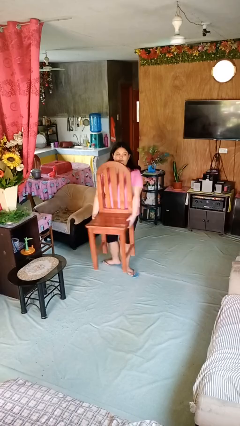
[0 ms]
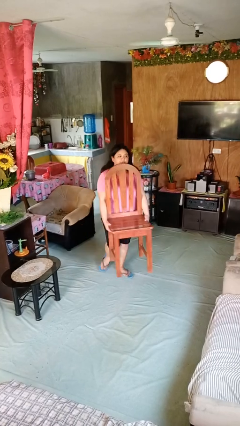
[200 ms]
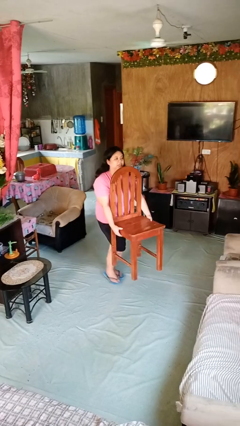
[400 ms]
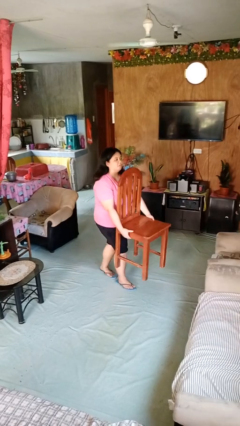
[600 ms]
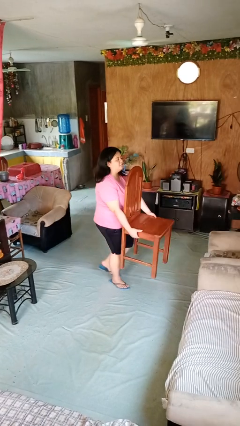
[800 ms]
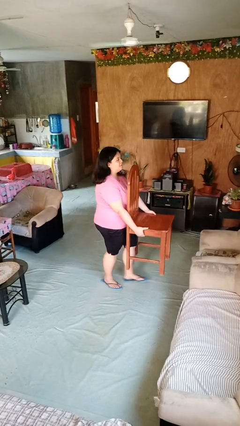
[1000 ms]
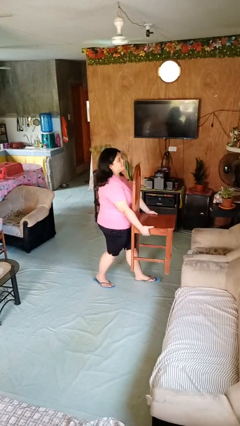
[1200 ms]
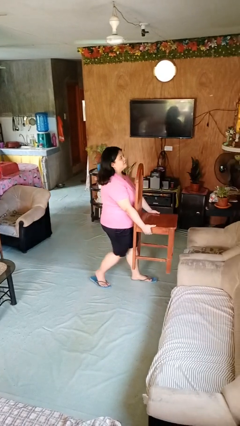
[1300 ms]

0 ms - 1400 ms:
person carries furniture

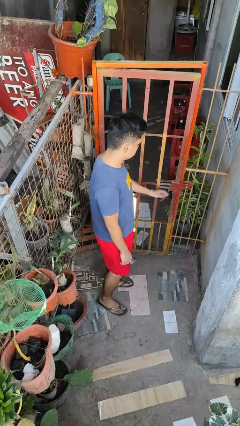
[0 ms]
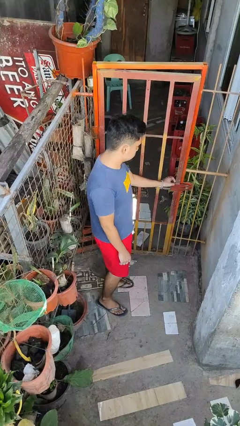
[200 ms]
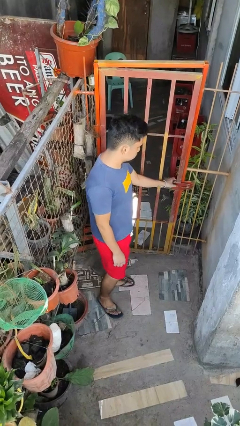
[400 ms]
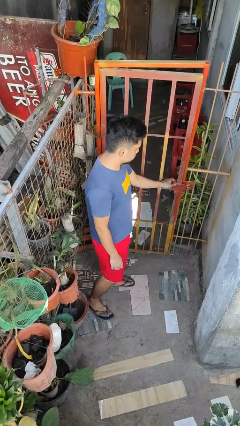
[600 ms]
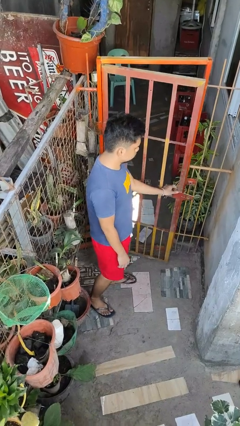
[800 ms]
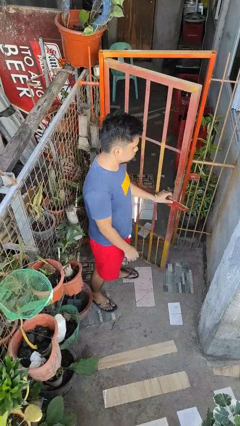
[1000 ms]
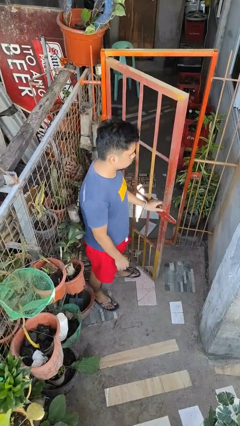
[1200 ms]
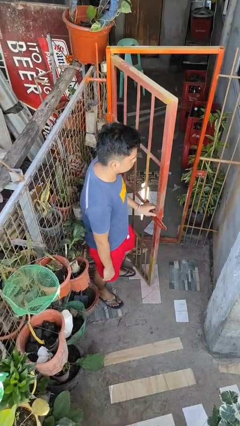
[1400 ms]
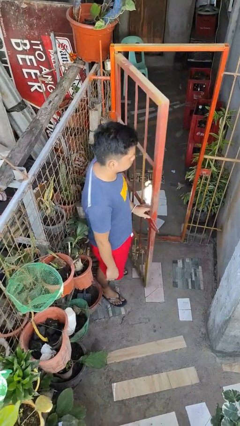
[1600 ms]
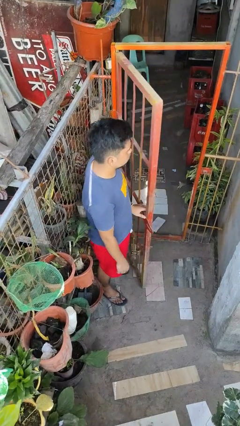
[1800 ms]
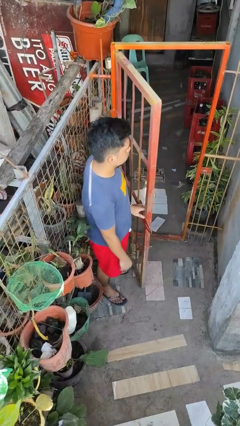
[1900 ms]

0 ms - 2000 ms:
person opens gate

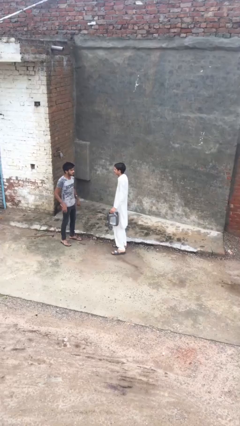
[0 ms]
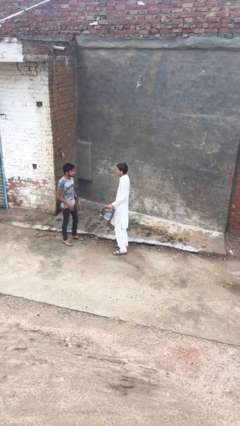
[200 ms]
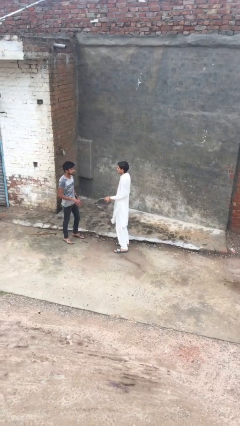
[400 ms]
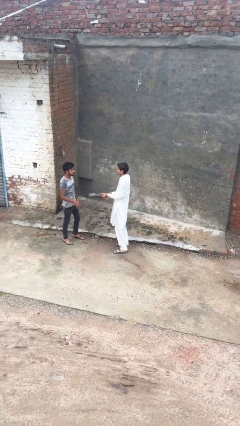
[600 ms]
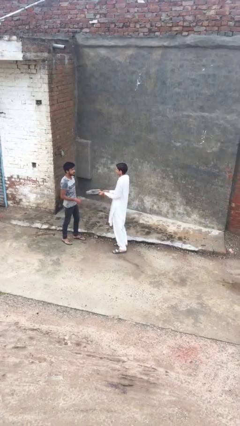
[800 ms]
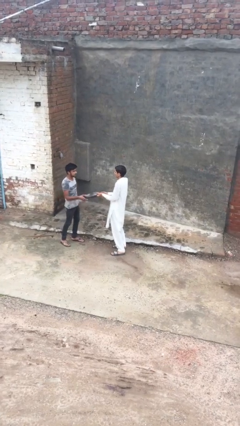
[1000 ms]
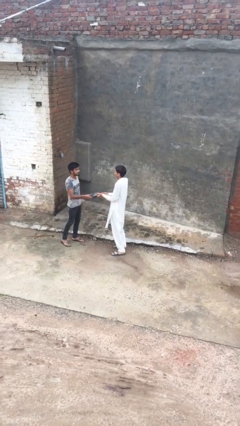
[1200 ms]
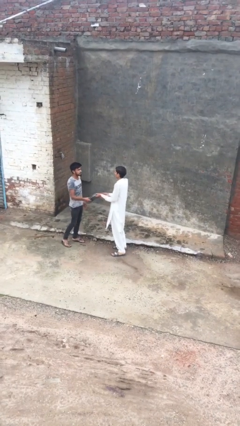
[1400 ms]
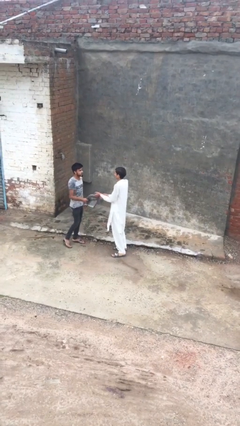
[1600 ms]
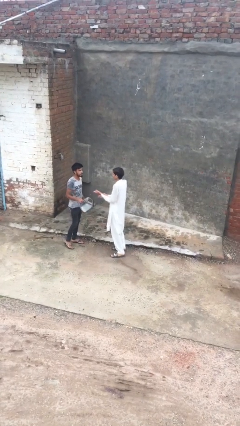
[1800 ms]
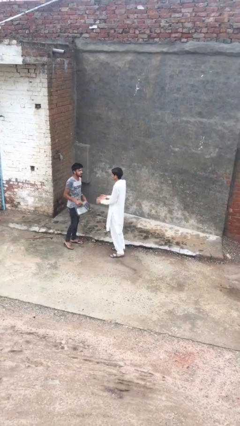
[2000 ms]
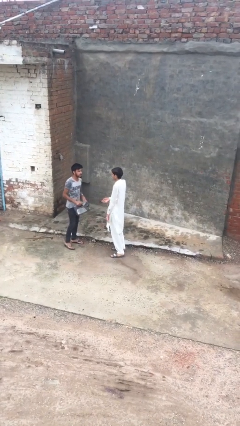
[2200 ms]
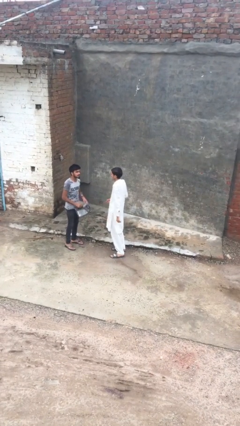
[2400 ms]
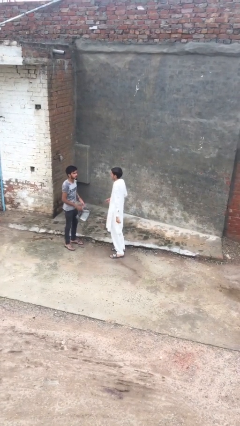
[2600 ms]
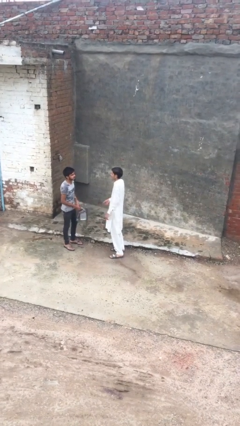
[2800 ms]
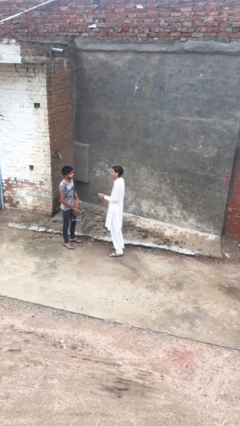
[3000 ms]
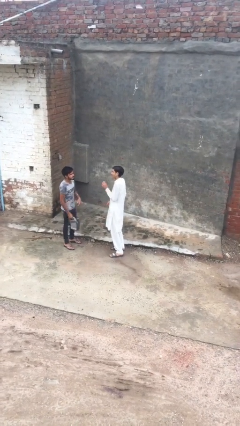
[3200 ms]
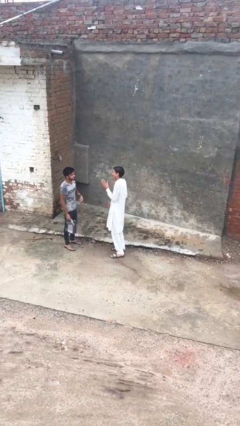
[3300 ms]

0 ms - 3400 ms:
person transfers object to person

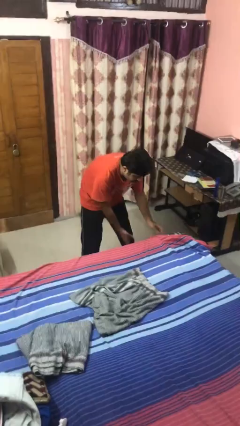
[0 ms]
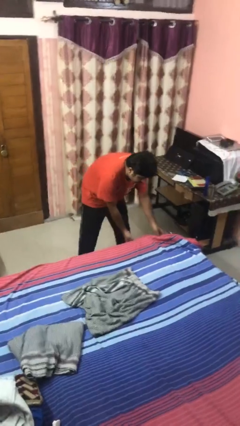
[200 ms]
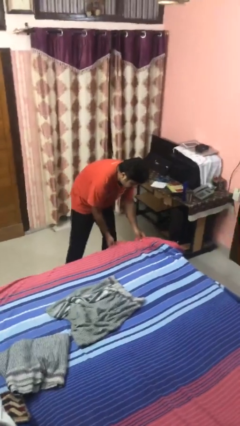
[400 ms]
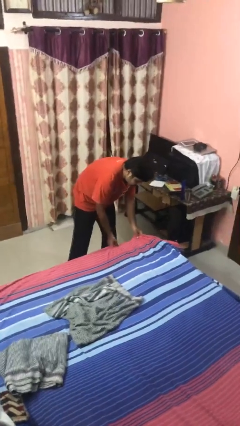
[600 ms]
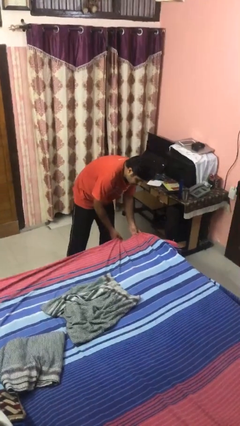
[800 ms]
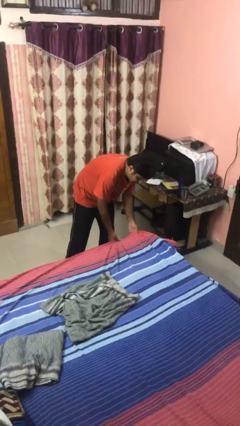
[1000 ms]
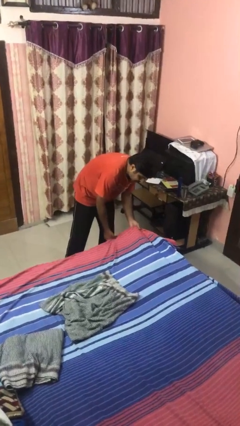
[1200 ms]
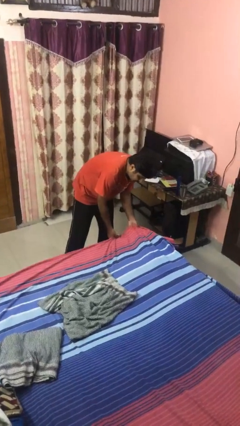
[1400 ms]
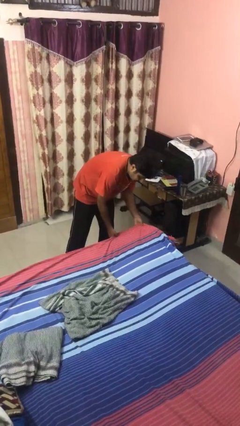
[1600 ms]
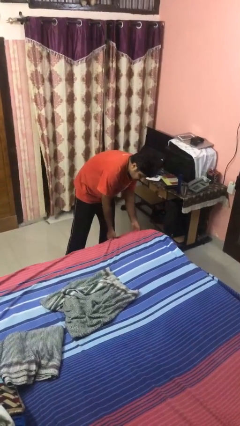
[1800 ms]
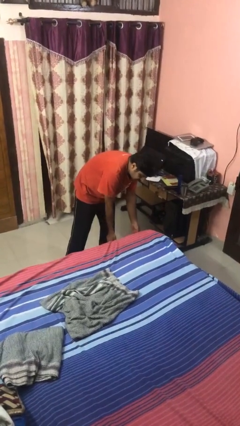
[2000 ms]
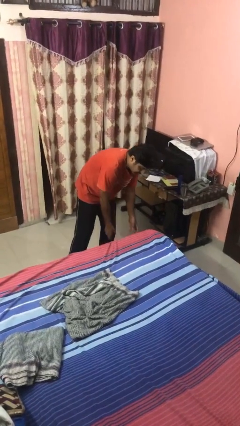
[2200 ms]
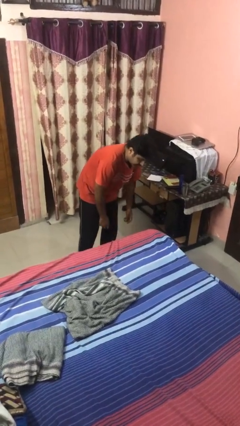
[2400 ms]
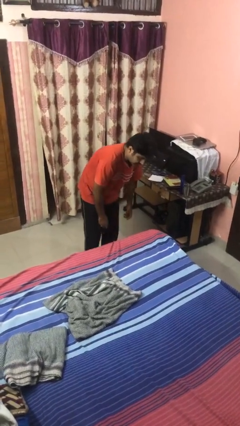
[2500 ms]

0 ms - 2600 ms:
person makes bed

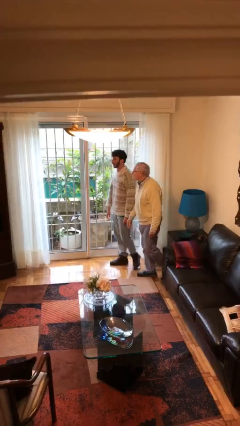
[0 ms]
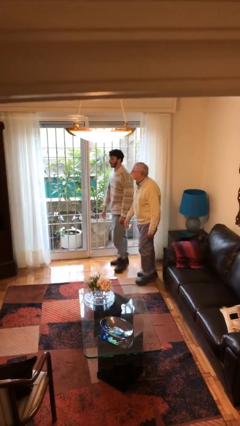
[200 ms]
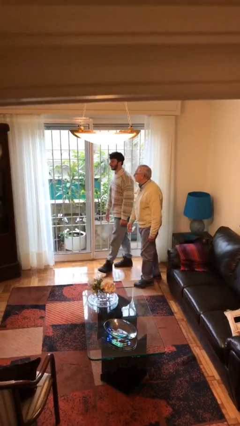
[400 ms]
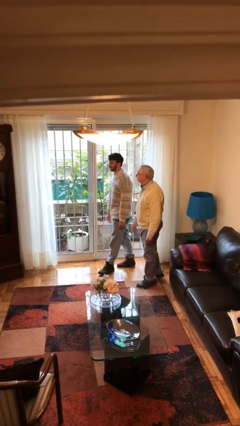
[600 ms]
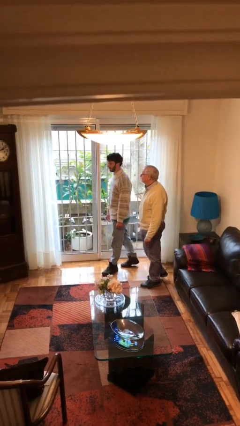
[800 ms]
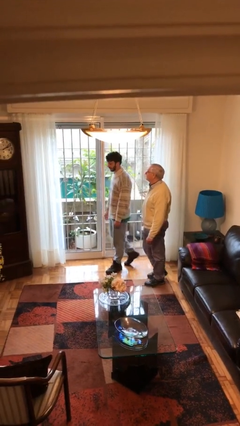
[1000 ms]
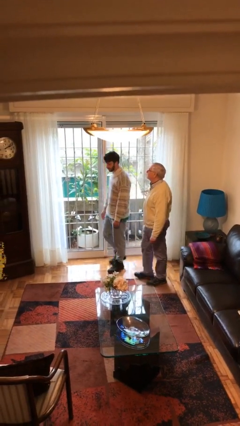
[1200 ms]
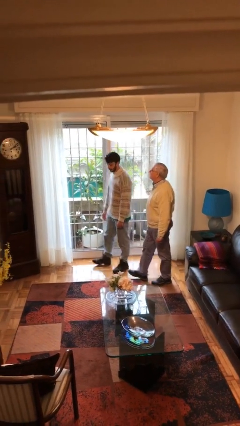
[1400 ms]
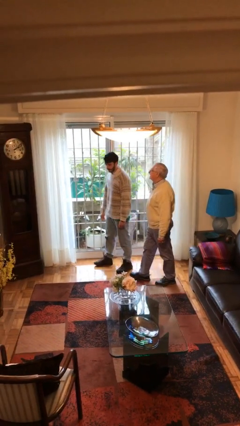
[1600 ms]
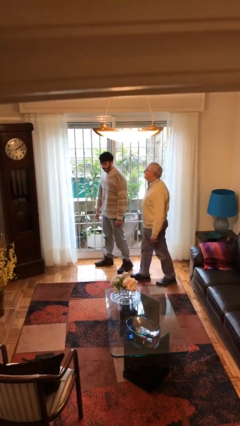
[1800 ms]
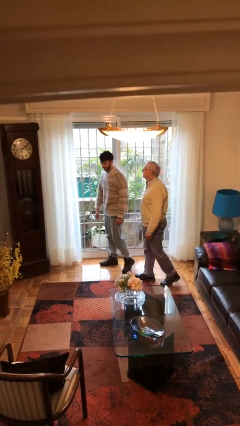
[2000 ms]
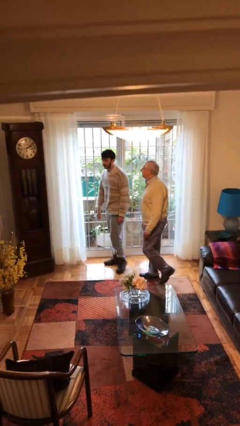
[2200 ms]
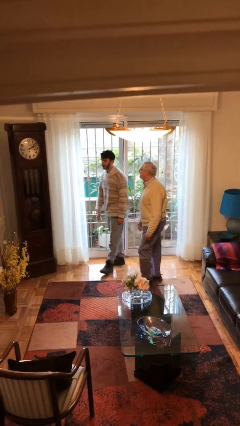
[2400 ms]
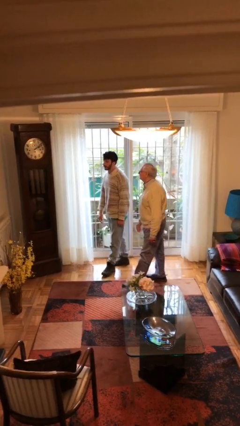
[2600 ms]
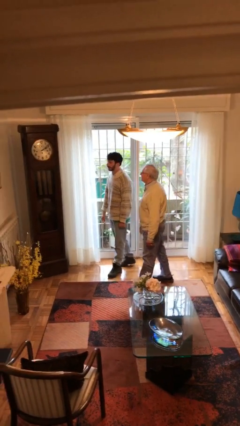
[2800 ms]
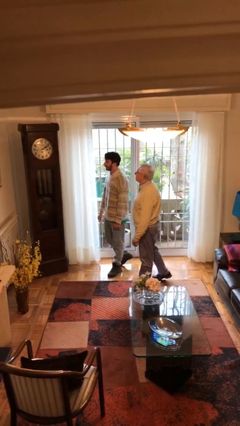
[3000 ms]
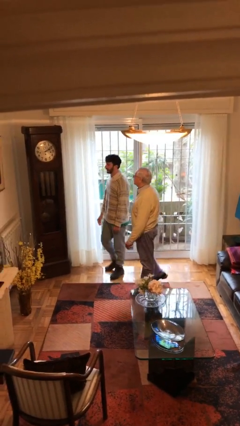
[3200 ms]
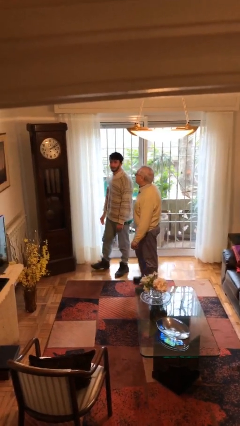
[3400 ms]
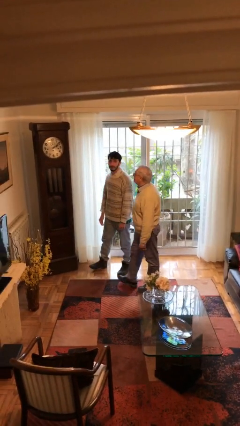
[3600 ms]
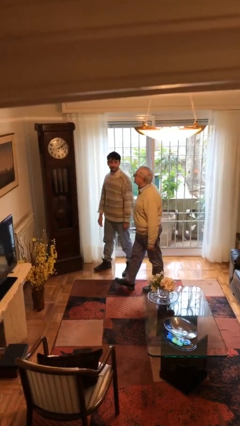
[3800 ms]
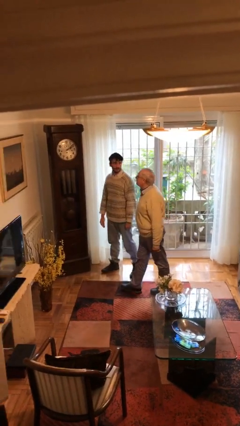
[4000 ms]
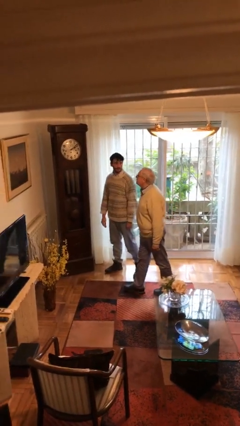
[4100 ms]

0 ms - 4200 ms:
person talks to person

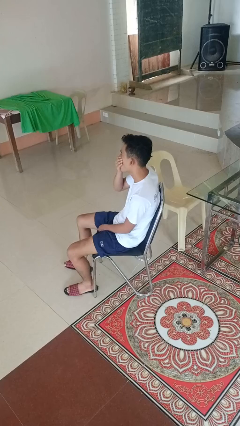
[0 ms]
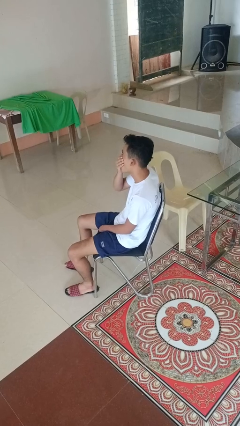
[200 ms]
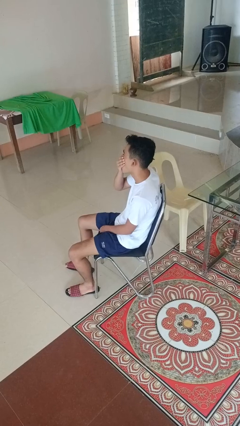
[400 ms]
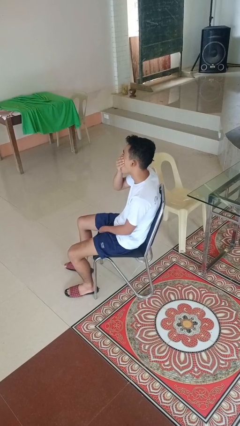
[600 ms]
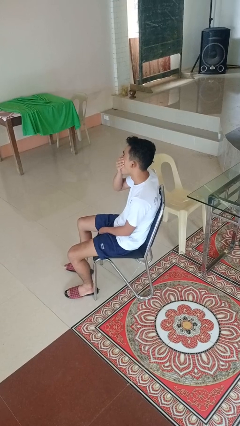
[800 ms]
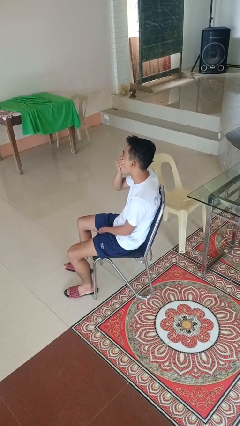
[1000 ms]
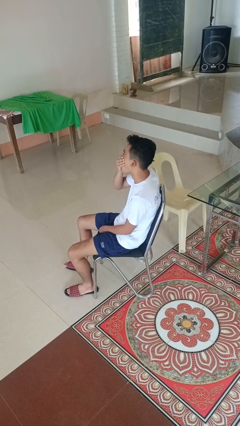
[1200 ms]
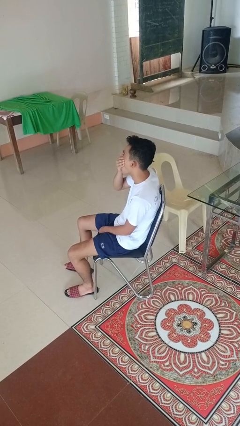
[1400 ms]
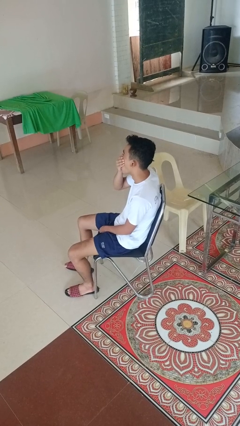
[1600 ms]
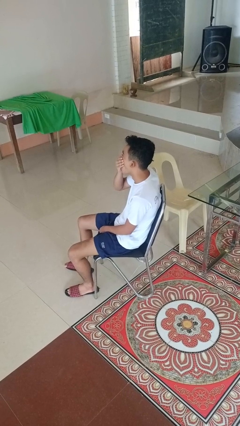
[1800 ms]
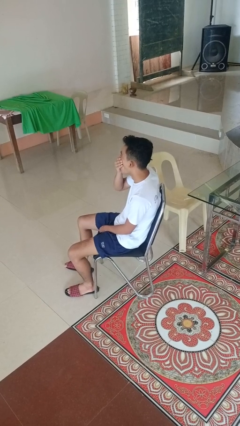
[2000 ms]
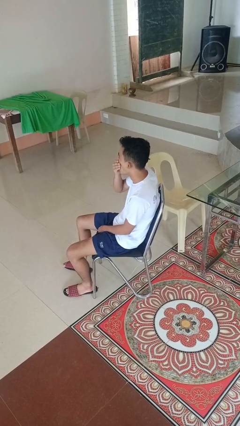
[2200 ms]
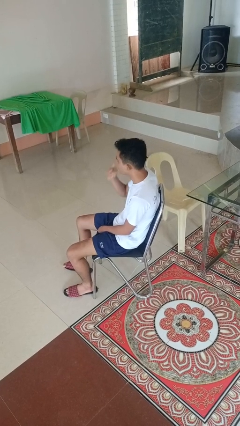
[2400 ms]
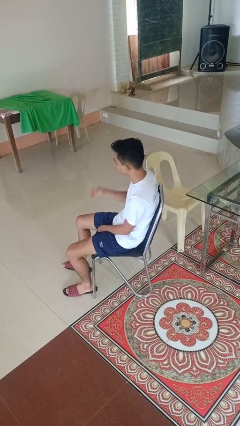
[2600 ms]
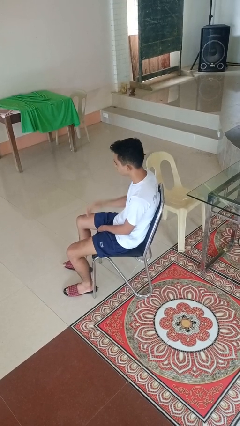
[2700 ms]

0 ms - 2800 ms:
person yawns

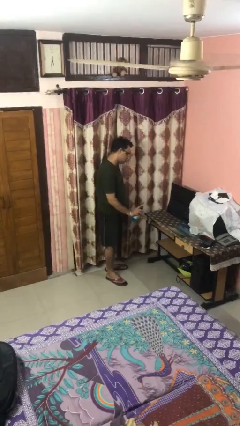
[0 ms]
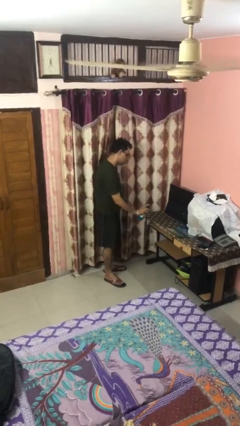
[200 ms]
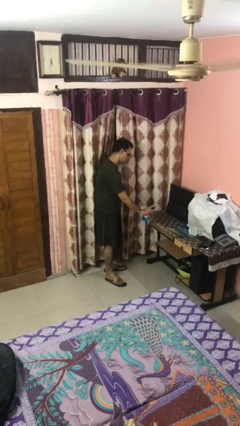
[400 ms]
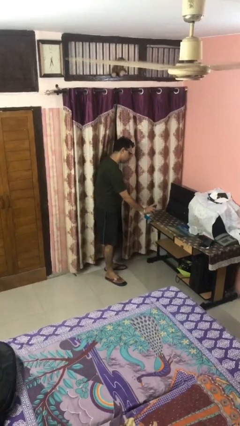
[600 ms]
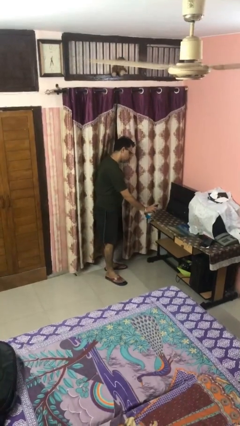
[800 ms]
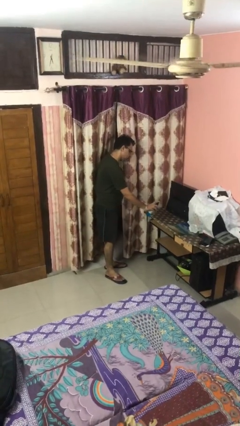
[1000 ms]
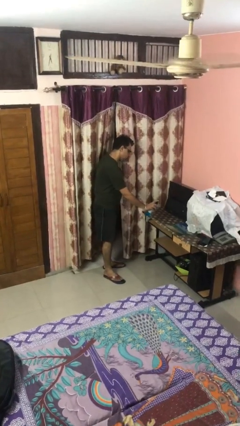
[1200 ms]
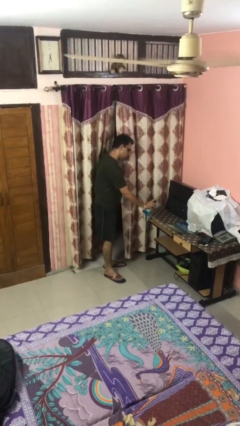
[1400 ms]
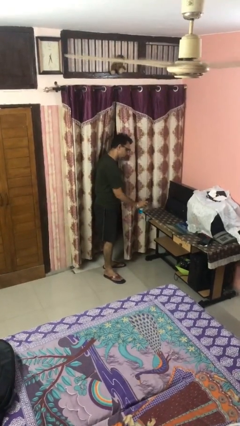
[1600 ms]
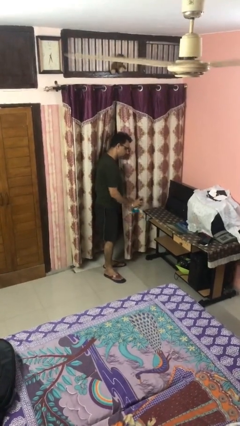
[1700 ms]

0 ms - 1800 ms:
person sprays from bottle
